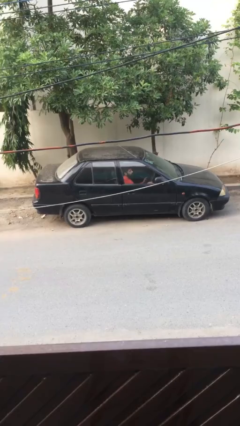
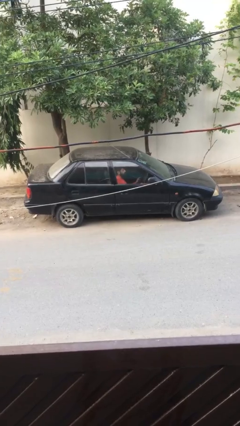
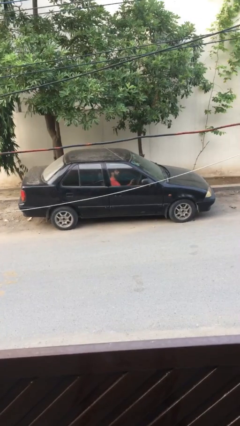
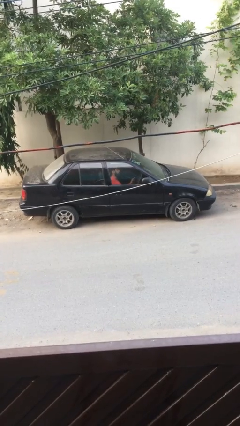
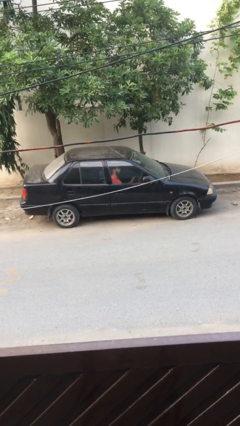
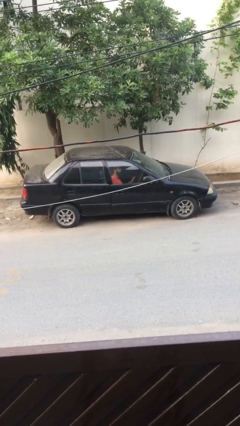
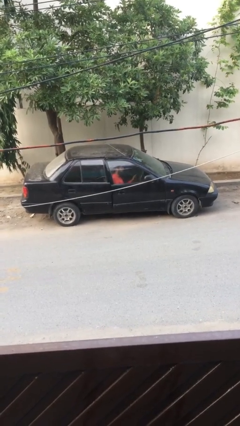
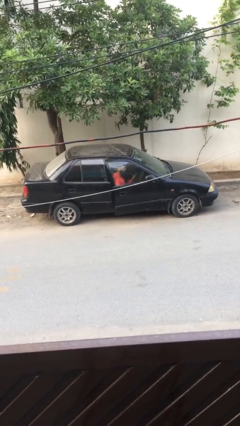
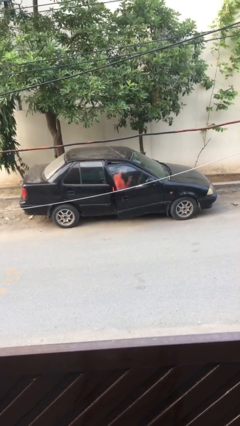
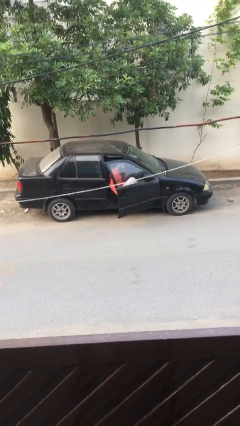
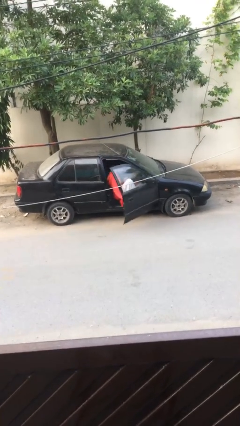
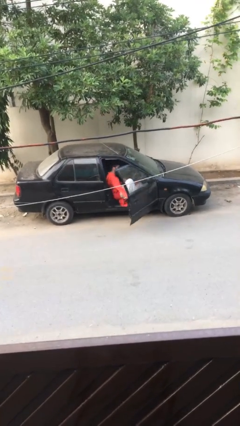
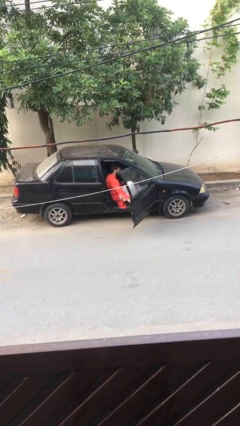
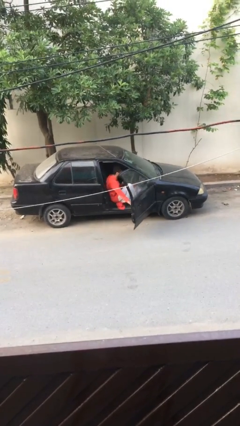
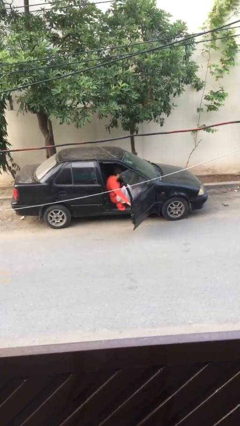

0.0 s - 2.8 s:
person opens car door

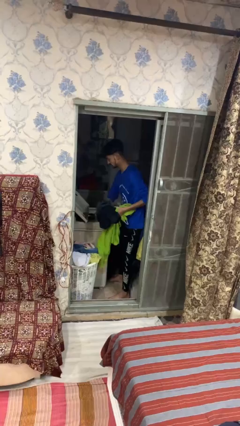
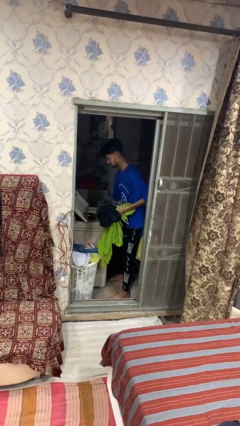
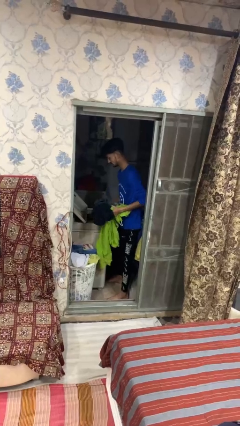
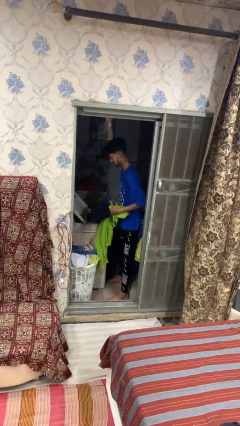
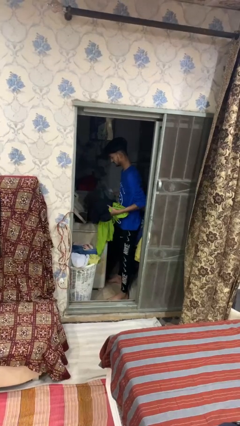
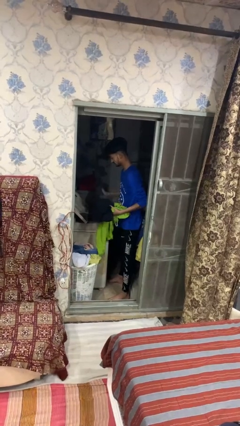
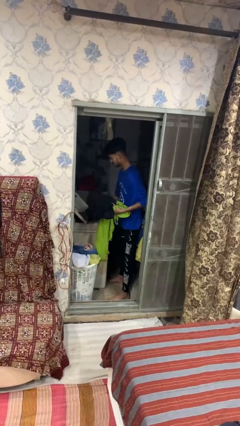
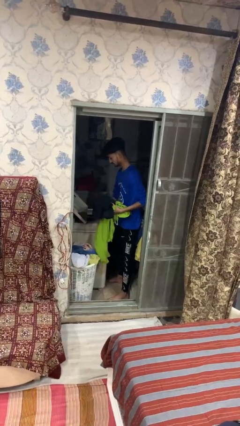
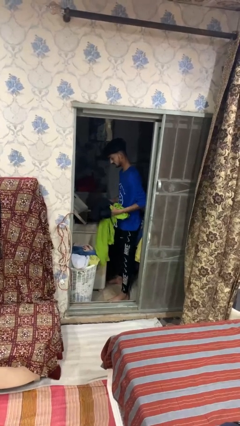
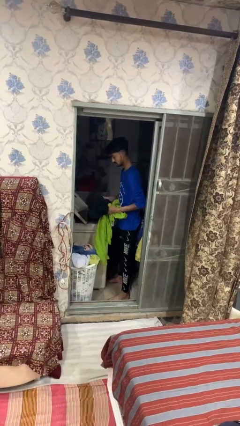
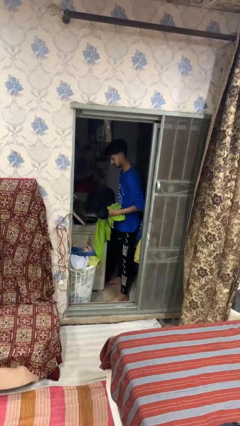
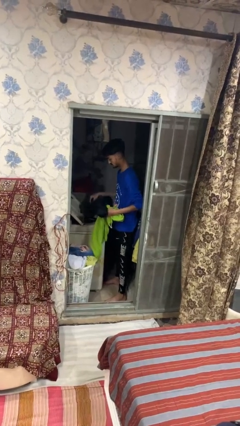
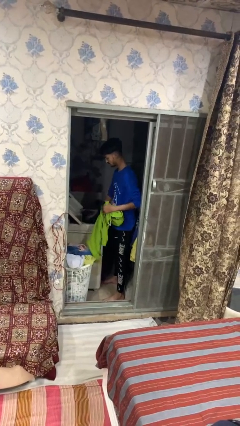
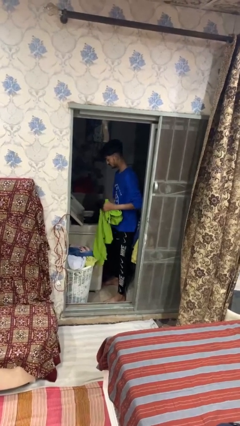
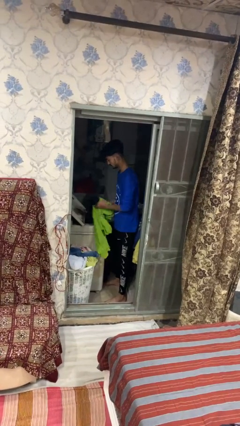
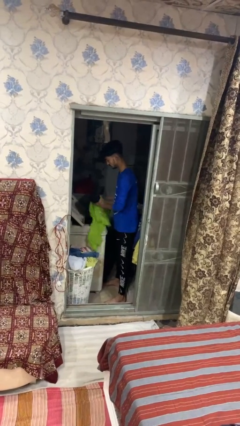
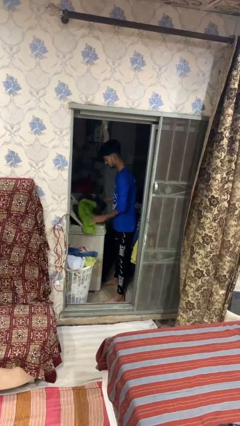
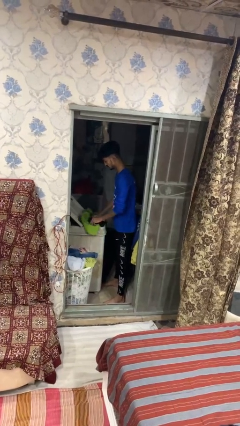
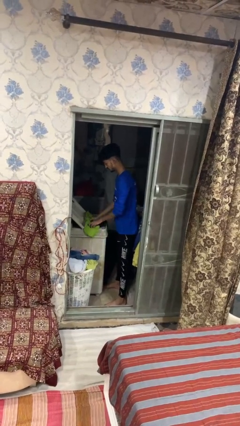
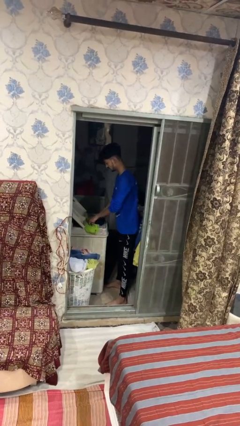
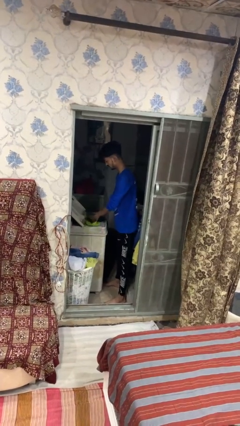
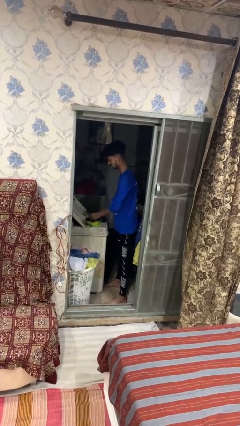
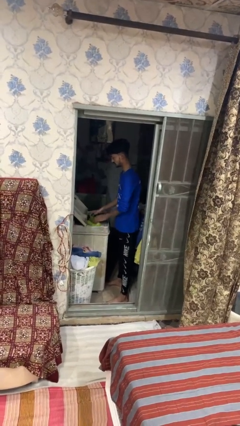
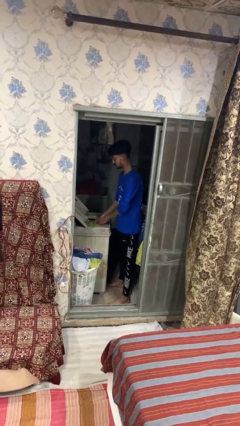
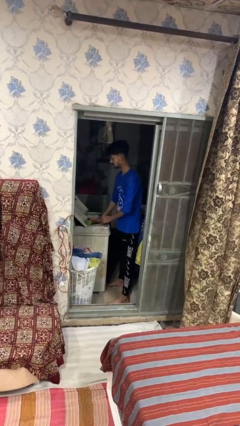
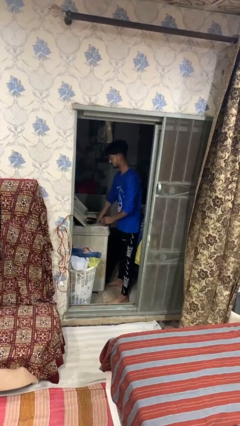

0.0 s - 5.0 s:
person loads clotheswasher

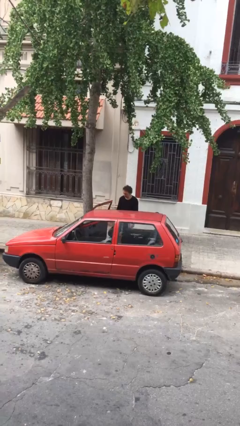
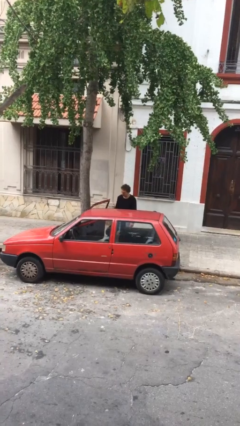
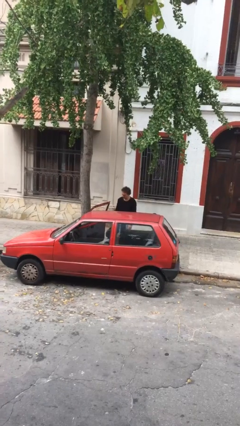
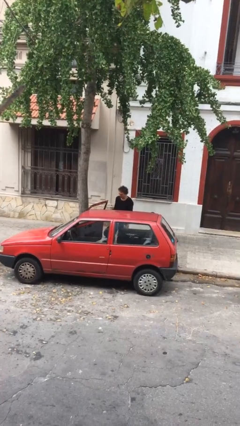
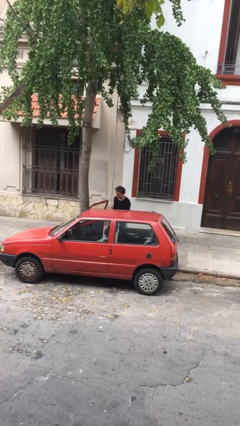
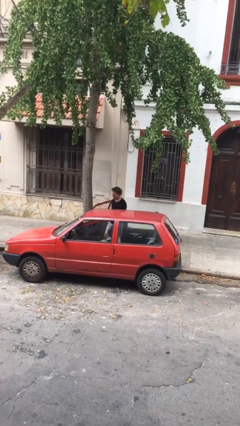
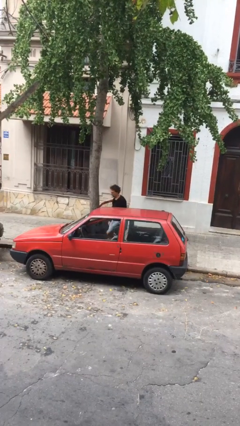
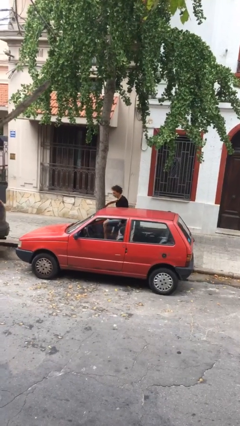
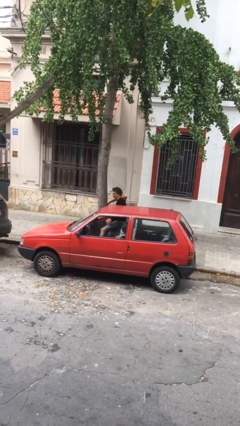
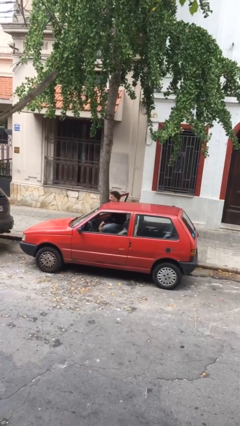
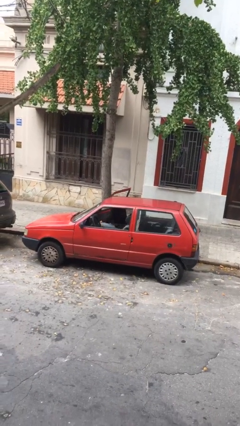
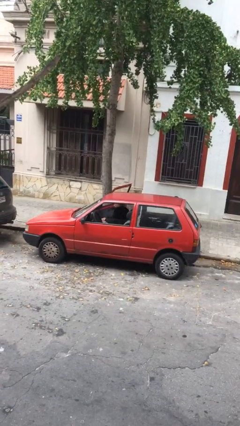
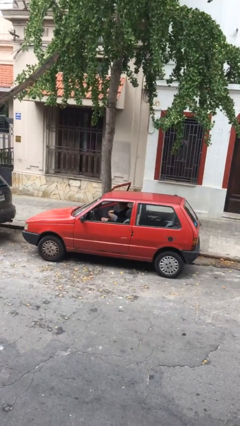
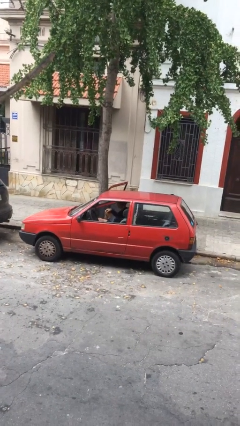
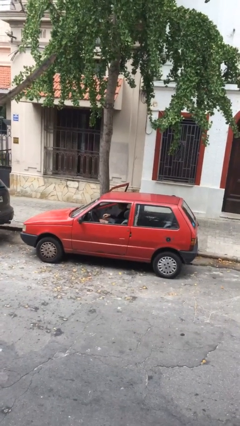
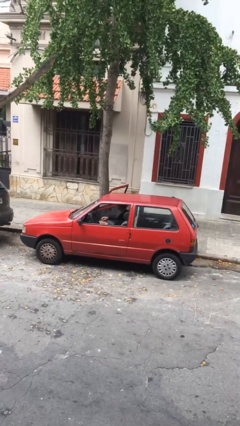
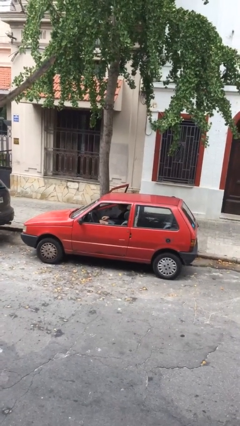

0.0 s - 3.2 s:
person enters car

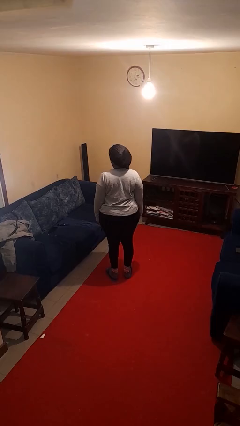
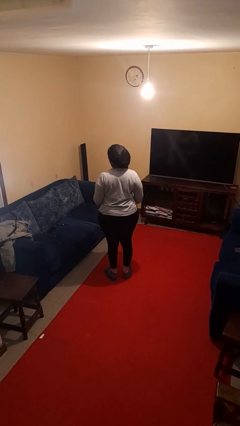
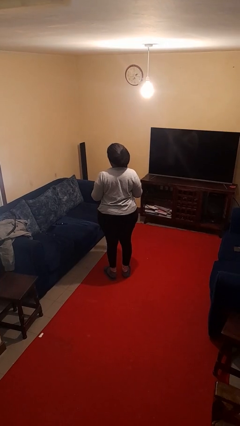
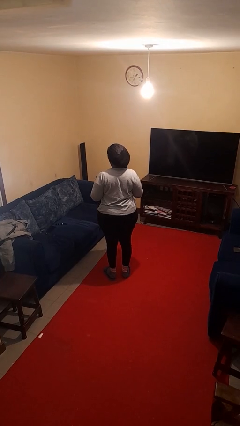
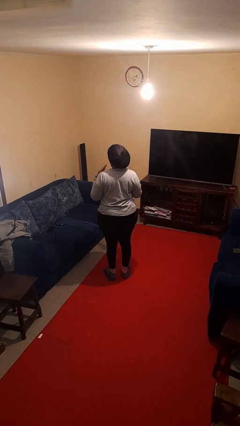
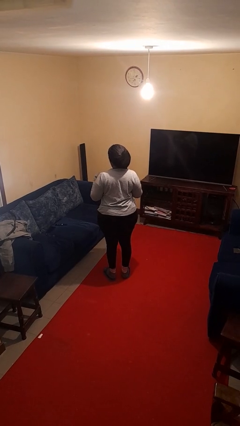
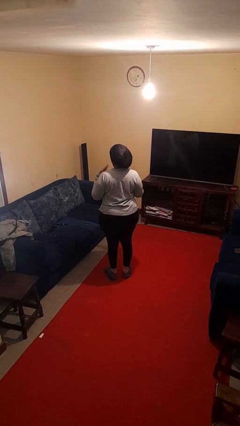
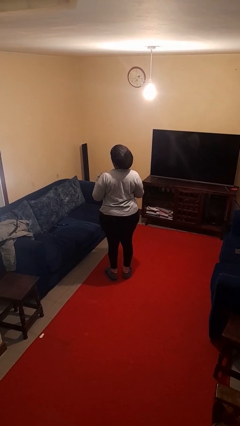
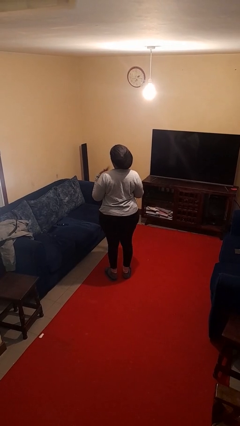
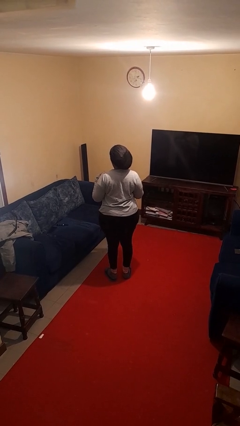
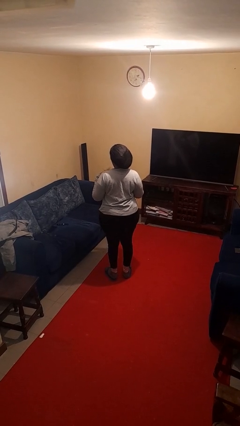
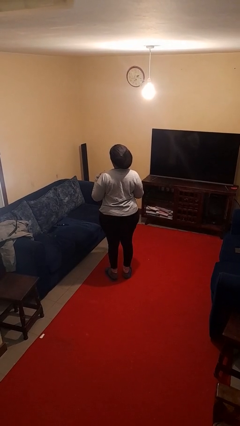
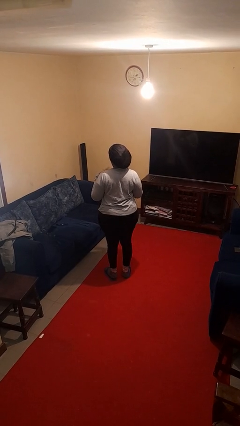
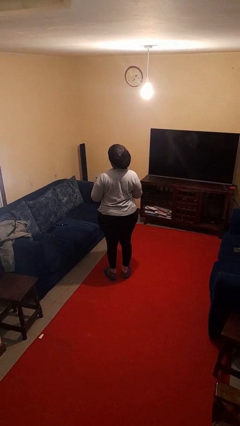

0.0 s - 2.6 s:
person drums on chest

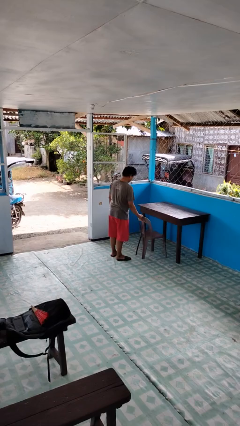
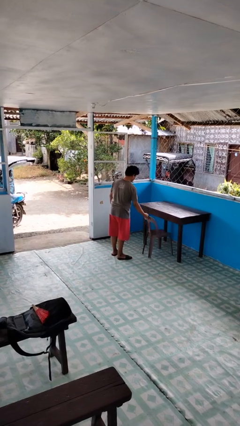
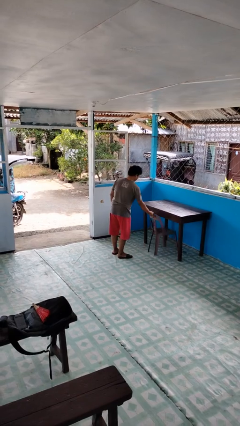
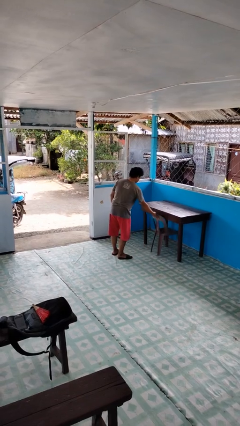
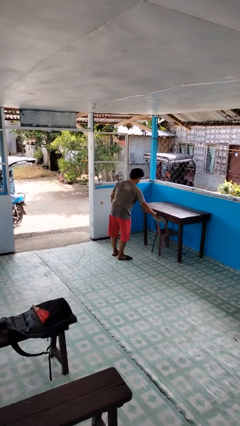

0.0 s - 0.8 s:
person pushes in chair

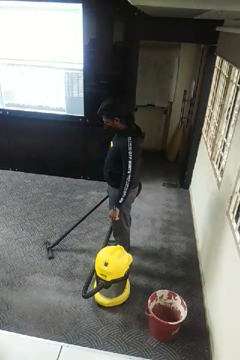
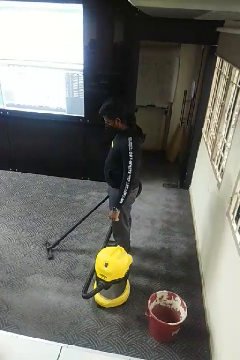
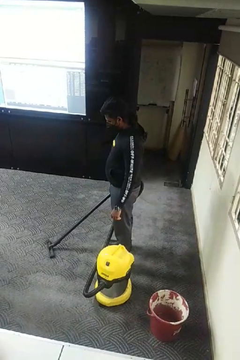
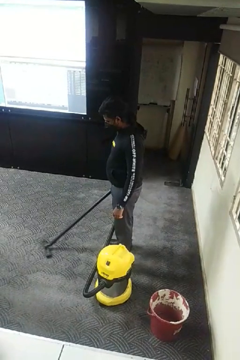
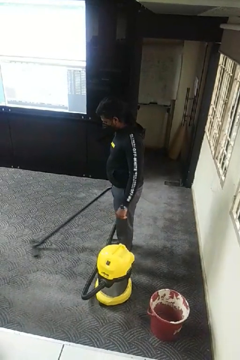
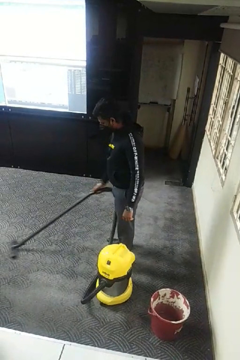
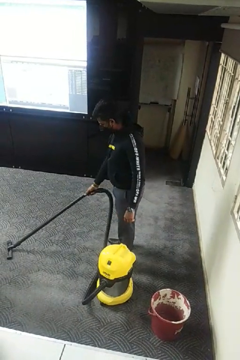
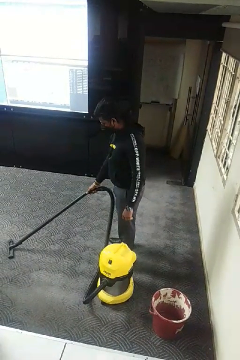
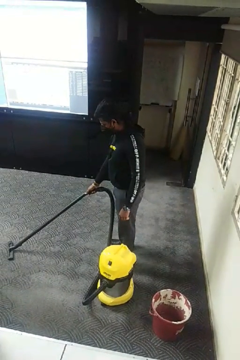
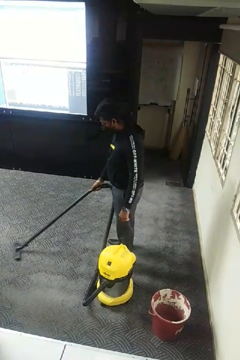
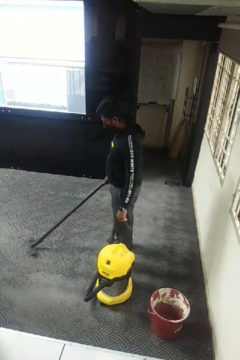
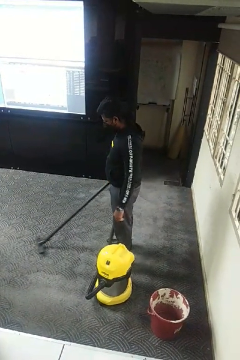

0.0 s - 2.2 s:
person vacuums carpet

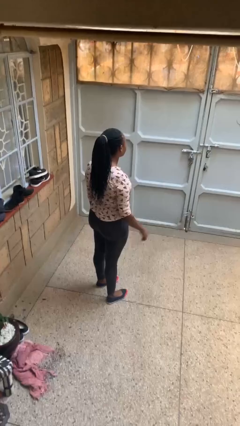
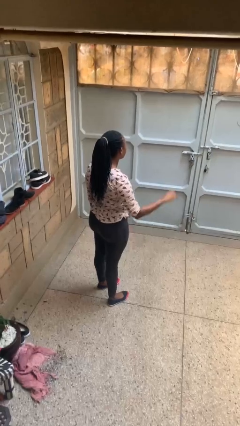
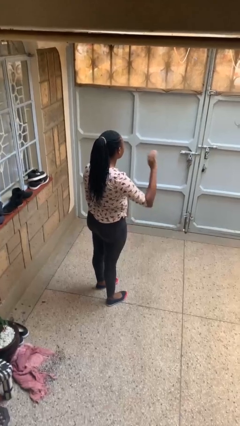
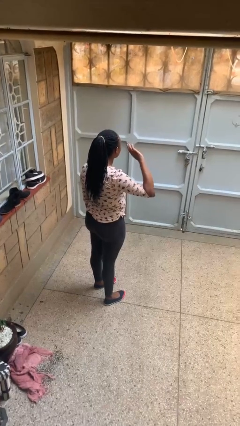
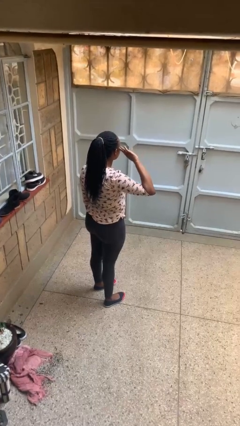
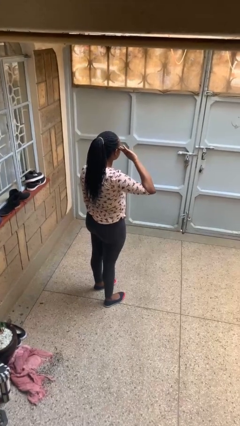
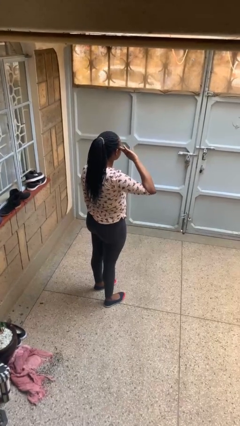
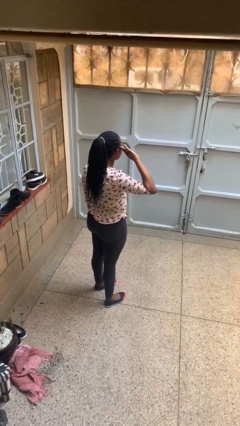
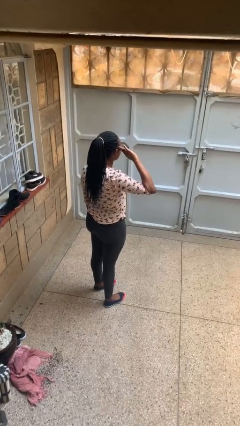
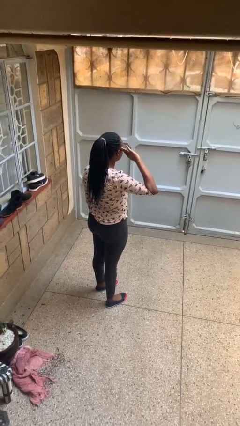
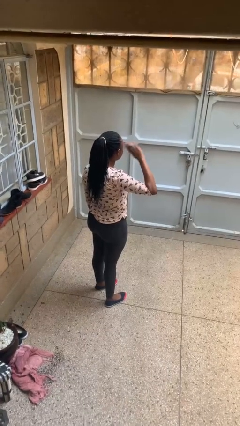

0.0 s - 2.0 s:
person salutes
